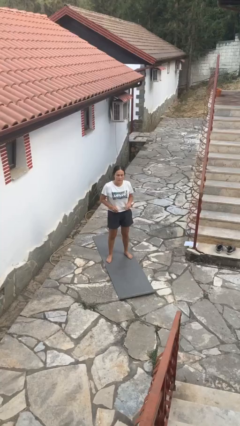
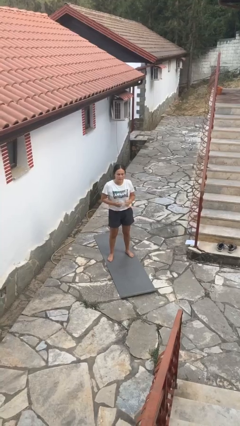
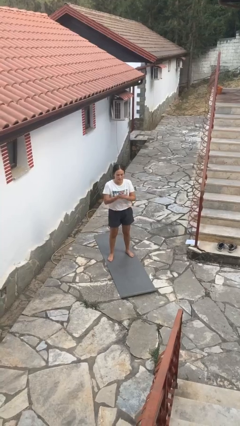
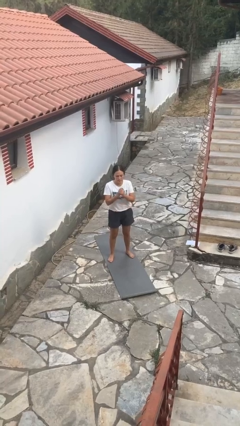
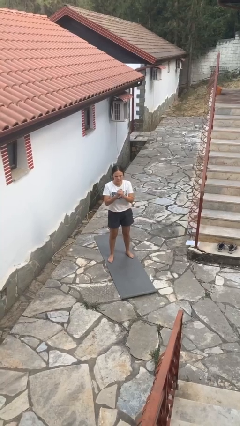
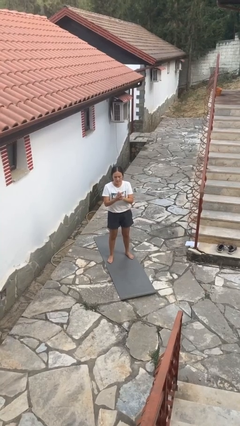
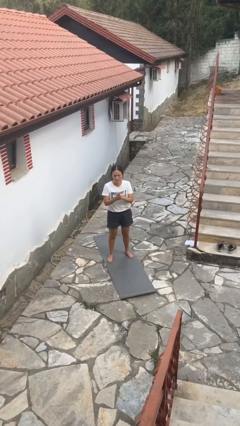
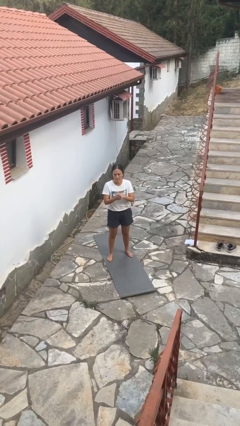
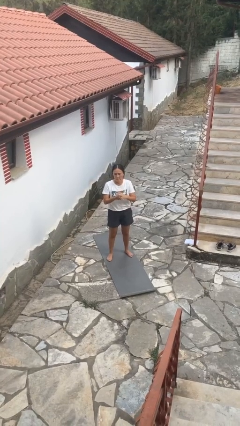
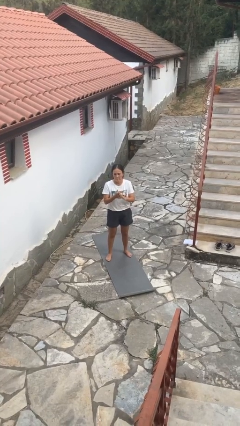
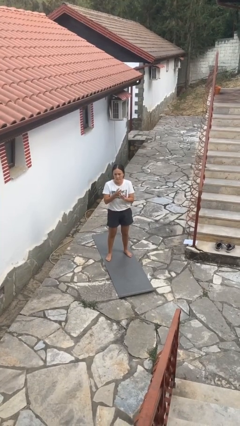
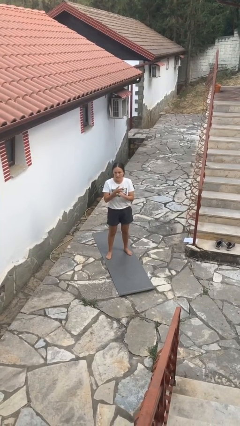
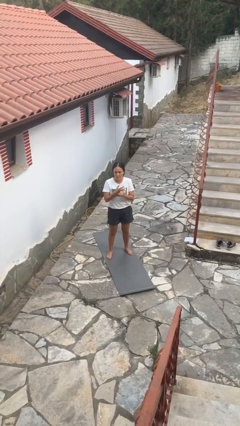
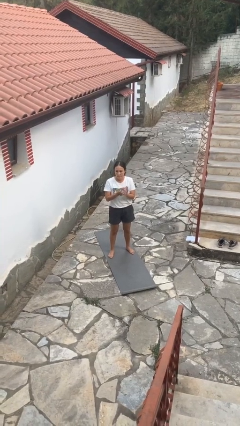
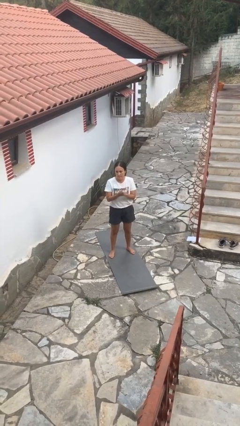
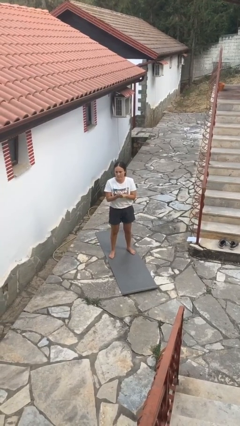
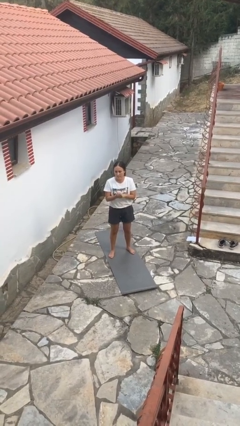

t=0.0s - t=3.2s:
person cracks knuckles

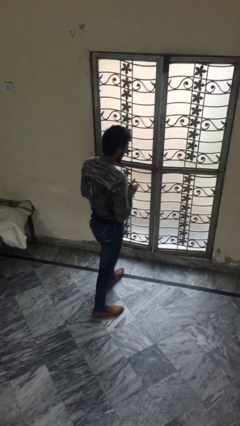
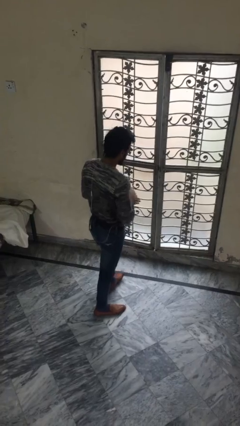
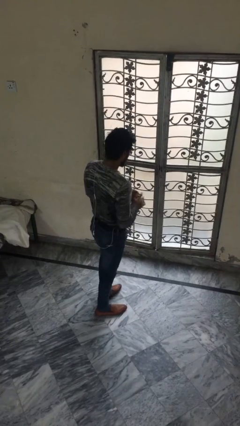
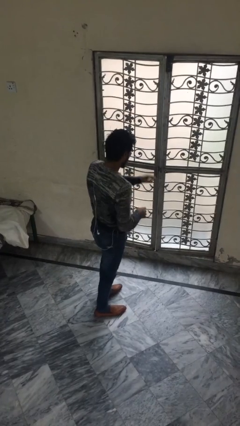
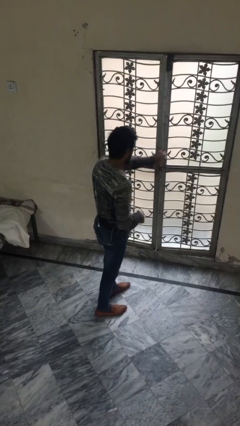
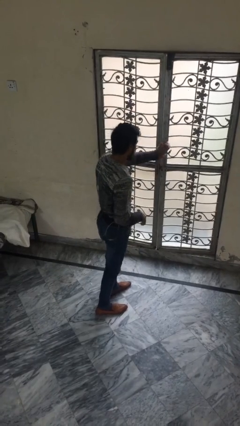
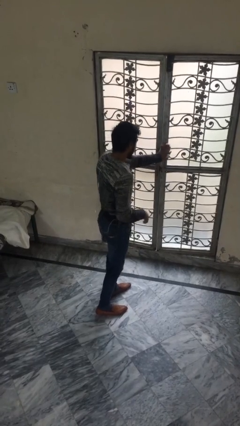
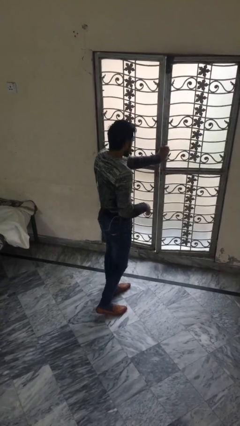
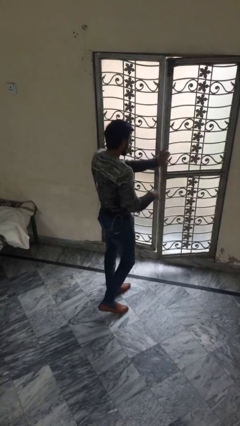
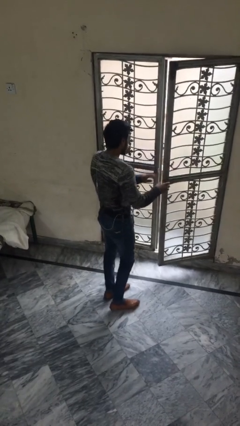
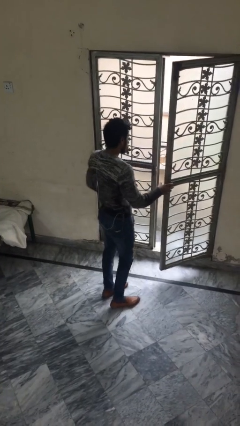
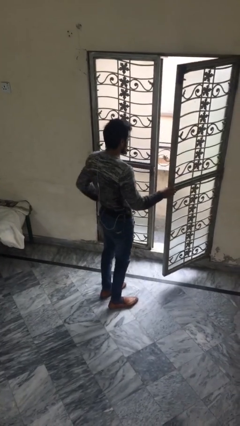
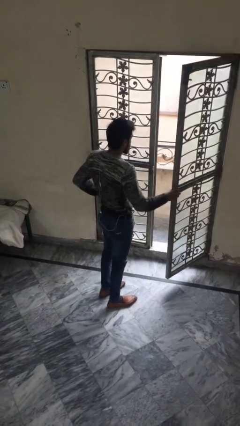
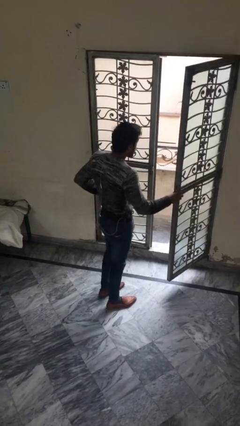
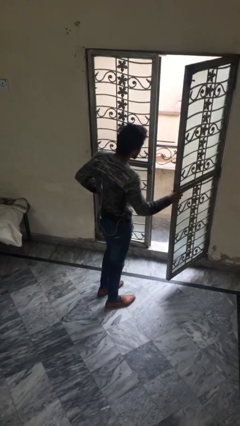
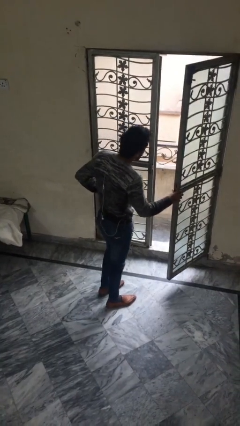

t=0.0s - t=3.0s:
person opens facility door

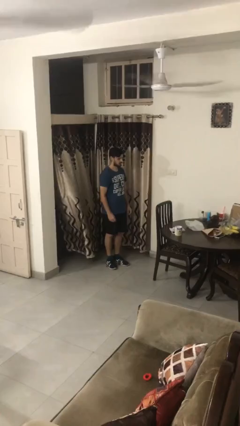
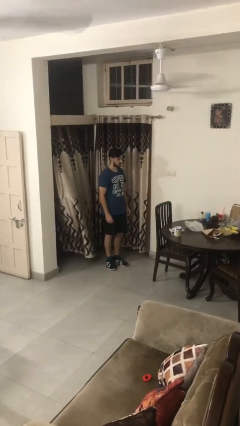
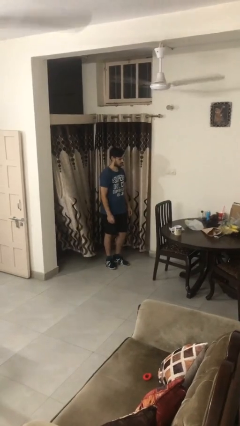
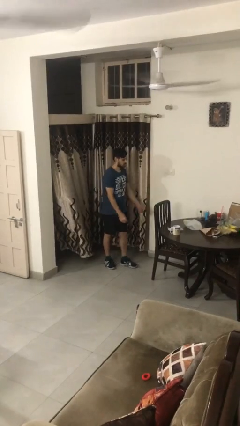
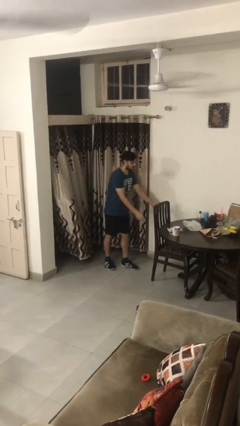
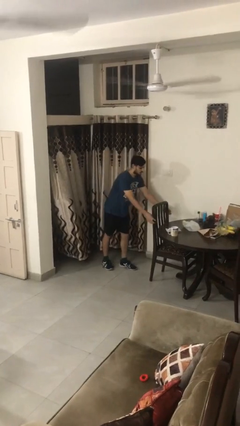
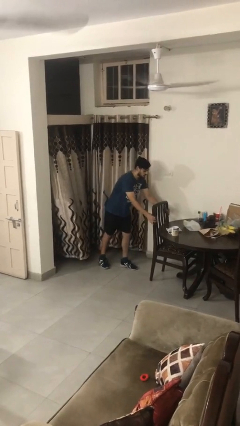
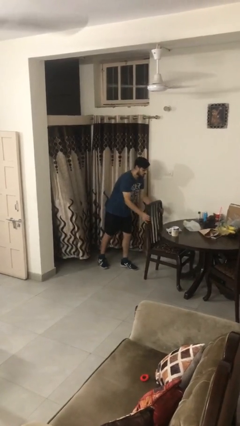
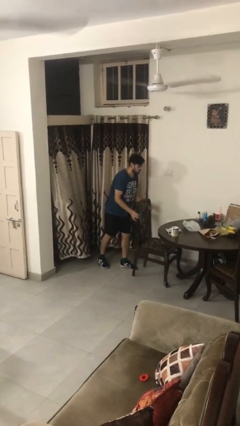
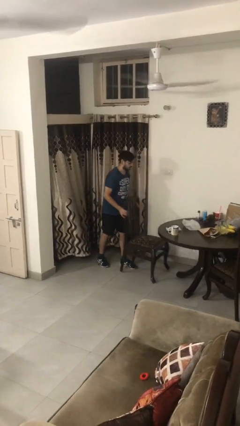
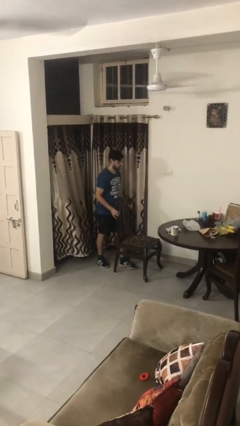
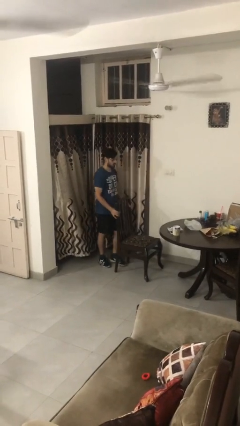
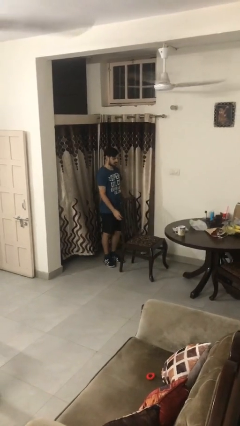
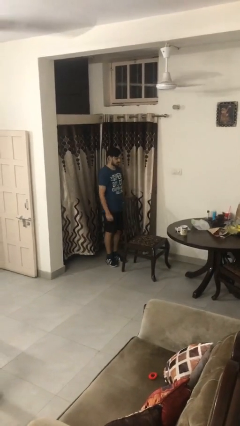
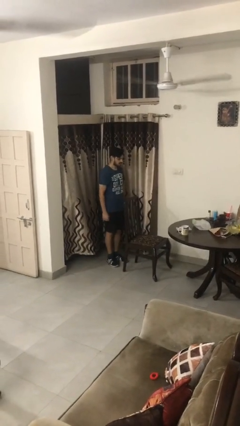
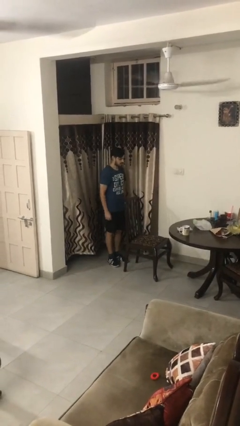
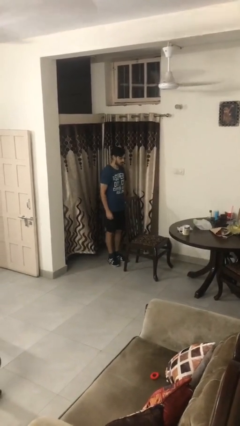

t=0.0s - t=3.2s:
person pulls out chair

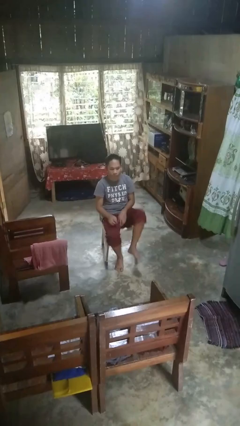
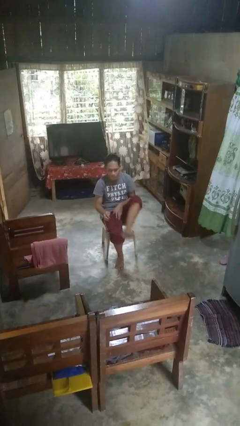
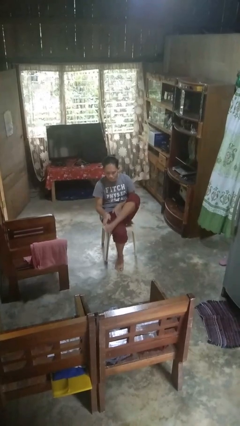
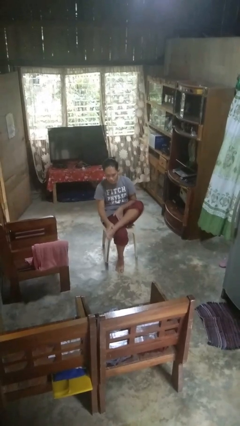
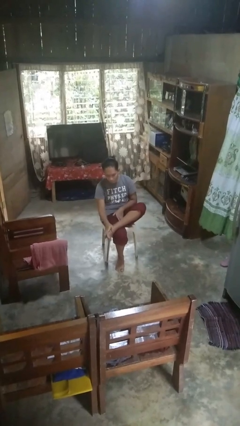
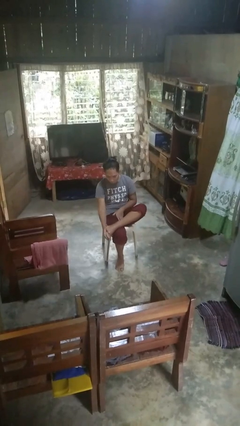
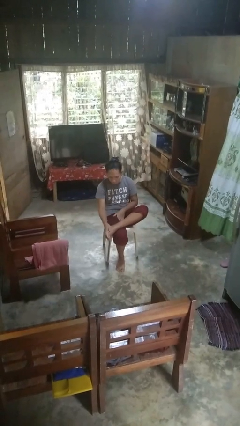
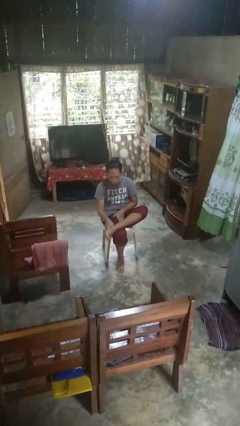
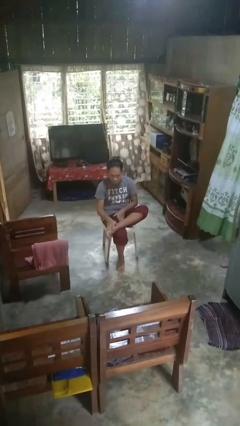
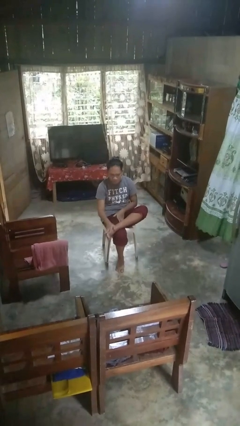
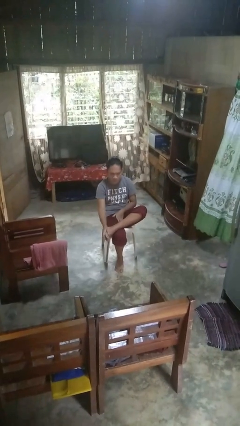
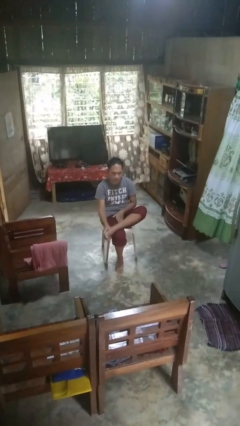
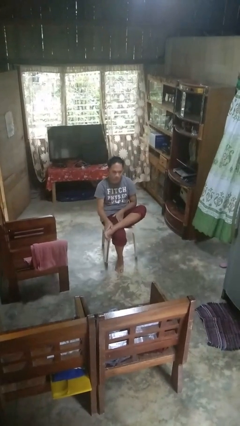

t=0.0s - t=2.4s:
person rubs foot

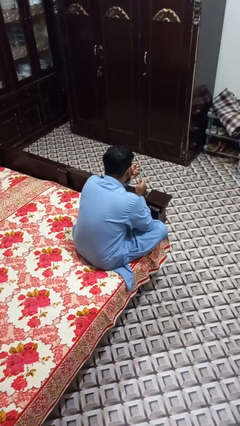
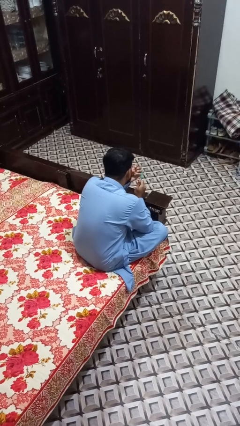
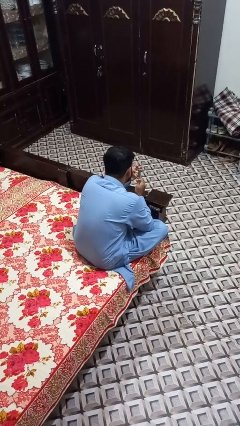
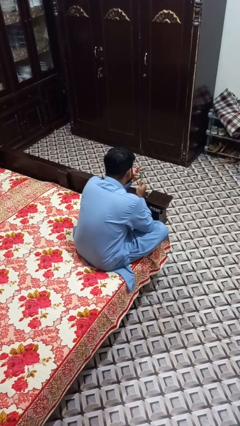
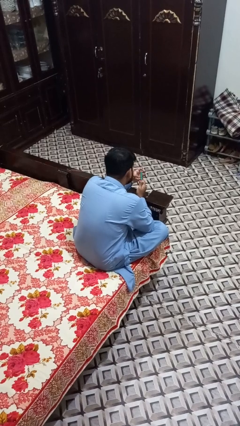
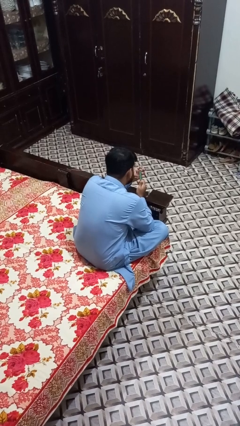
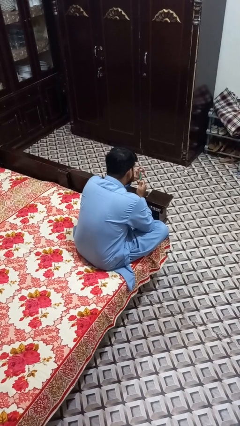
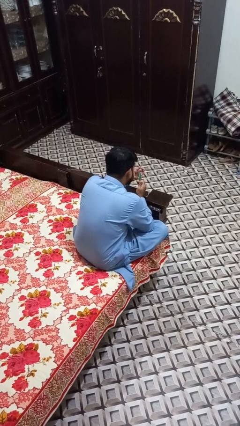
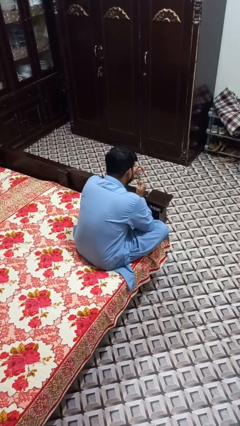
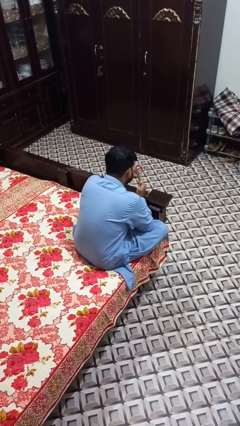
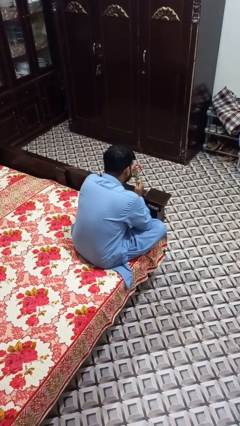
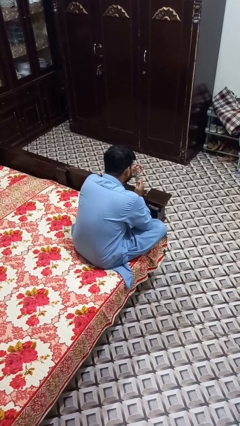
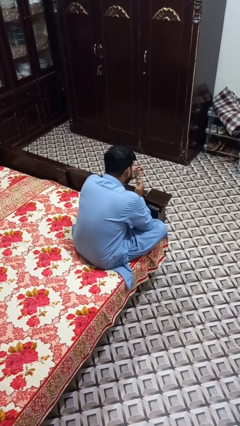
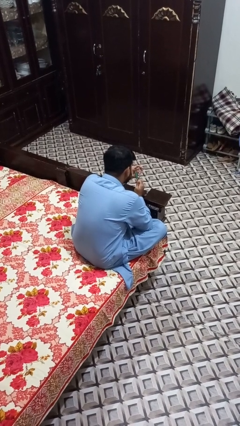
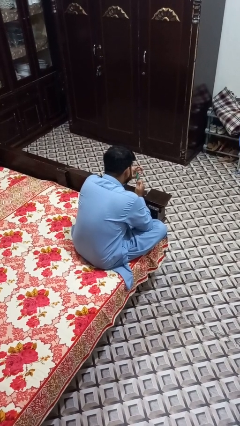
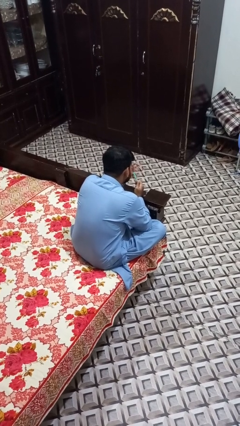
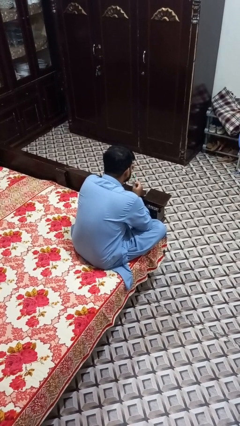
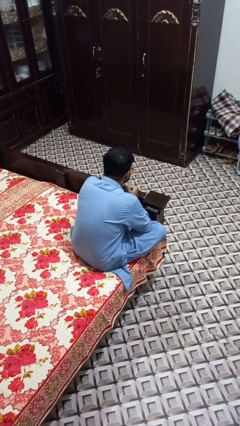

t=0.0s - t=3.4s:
person files fingernails

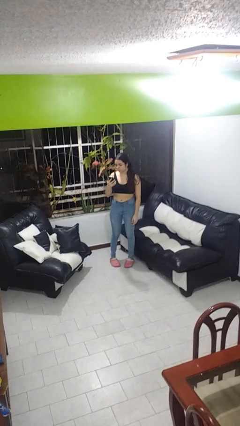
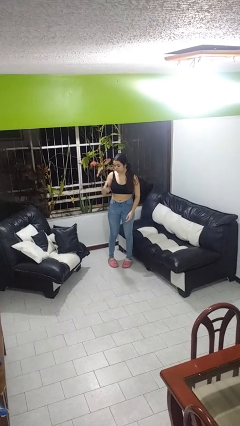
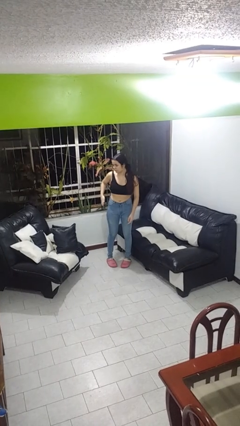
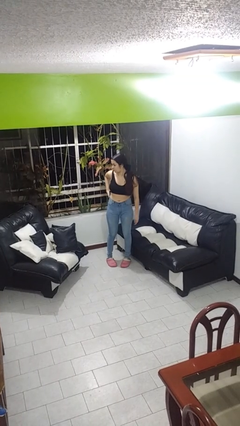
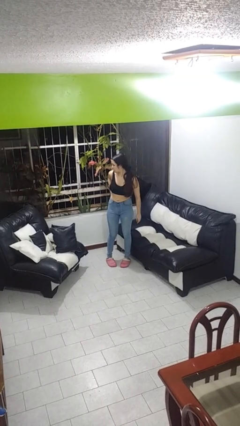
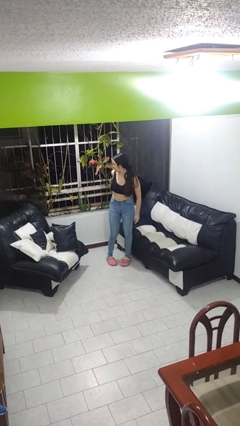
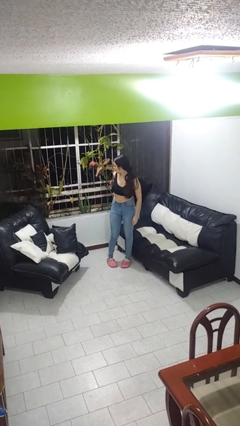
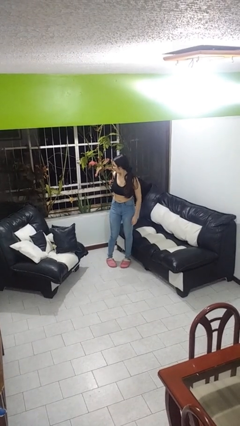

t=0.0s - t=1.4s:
person puts phone into pocket

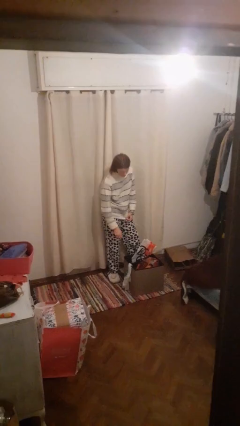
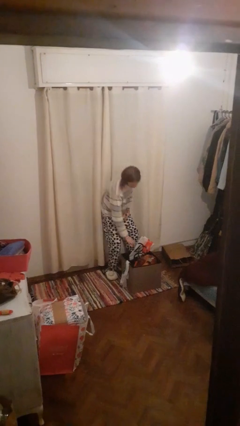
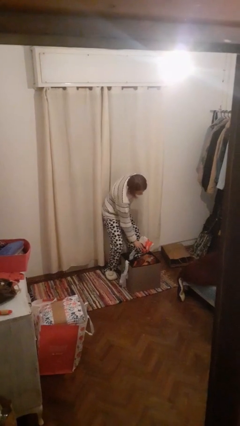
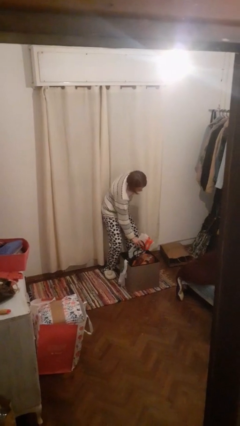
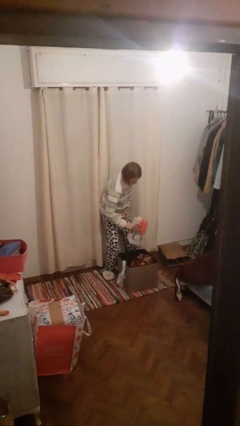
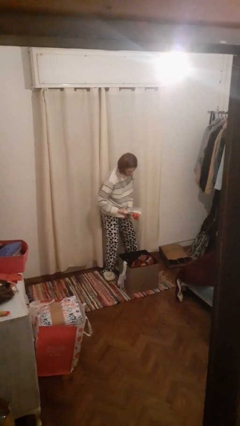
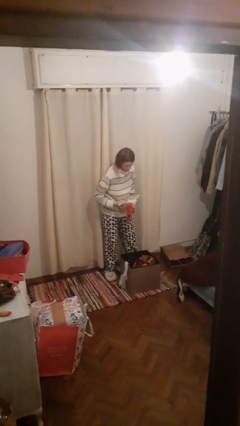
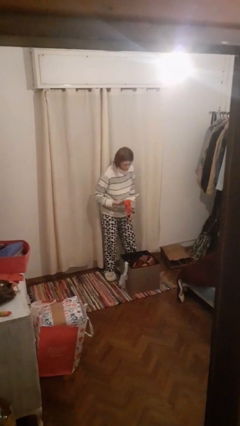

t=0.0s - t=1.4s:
person takes object from basket
